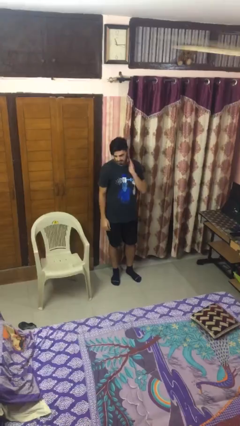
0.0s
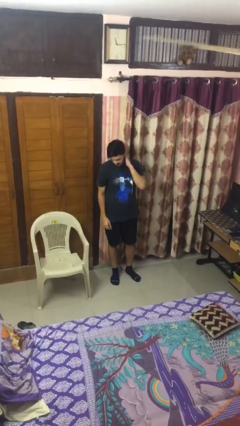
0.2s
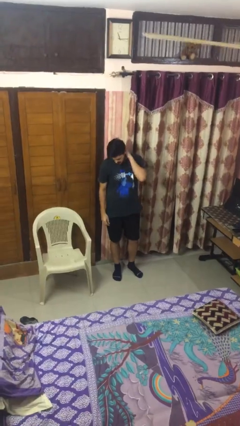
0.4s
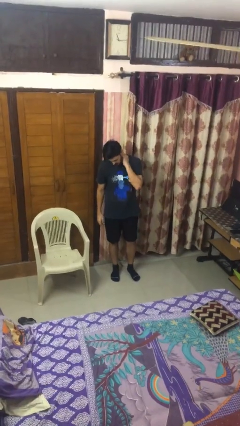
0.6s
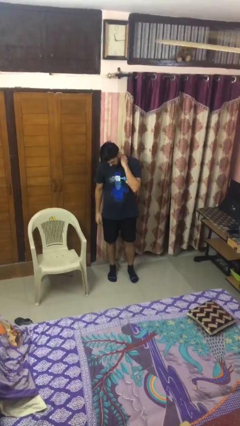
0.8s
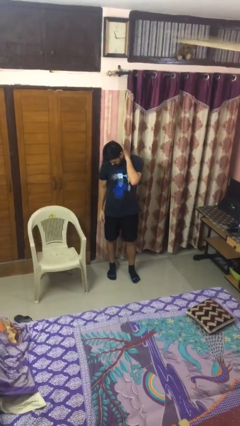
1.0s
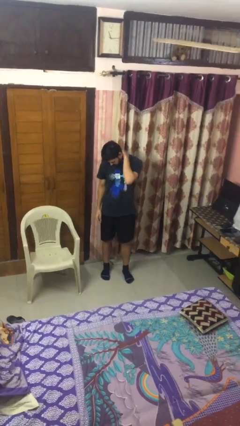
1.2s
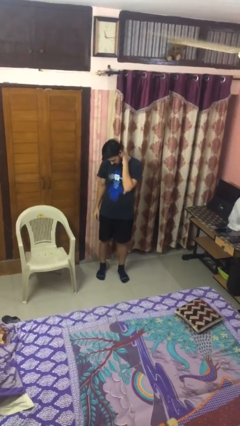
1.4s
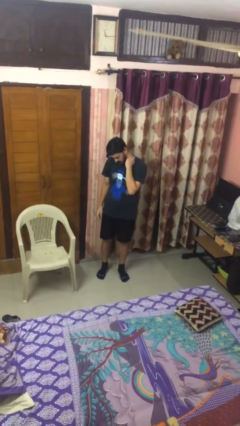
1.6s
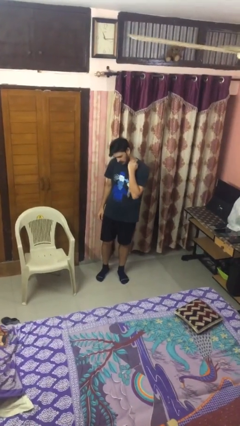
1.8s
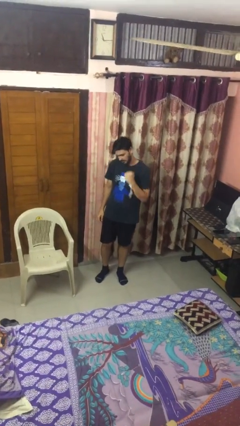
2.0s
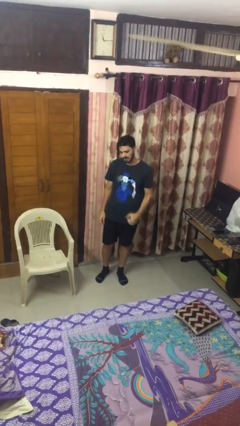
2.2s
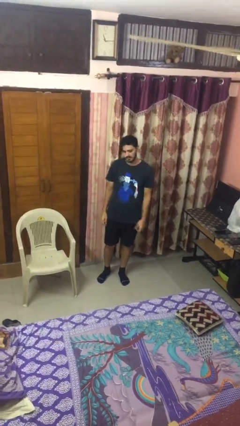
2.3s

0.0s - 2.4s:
person rubs neck

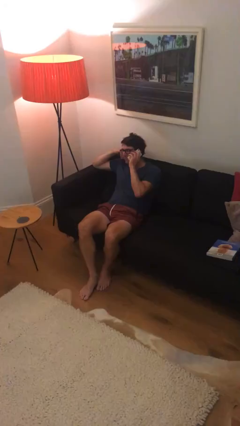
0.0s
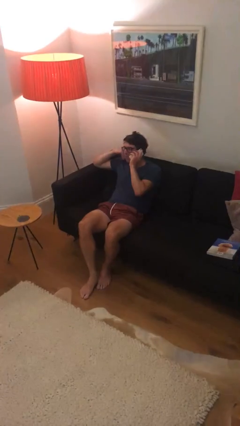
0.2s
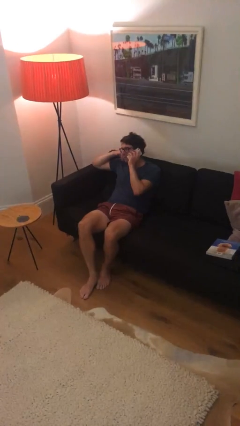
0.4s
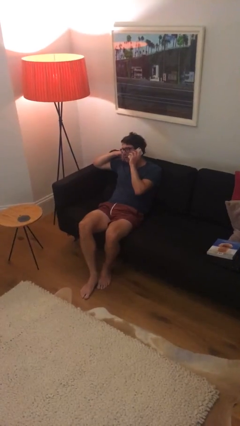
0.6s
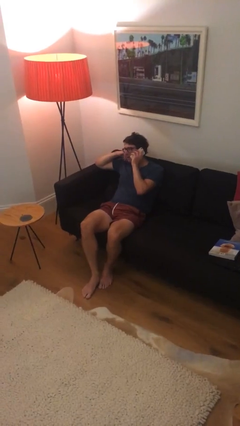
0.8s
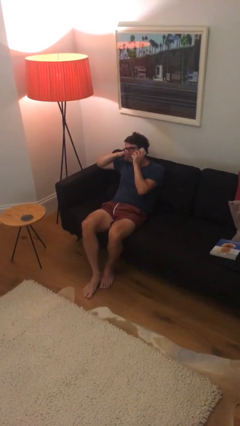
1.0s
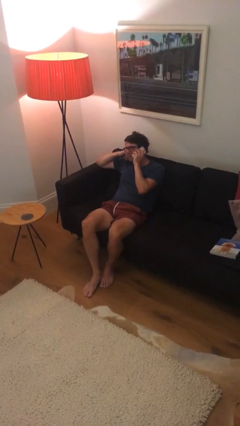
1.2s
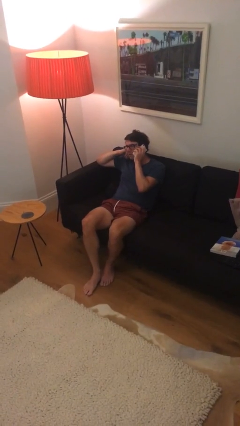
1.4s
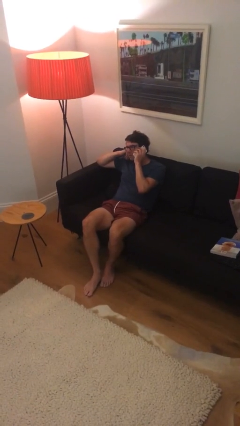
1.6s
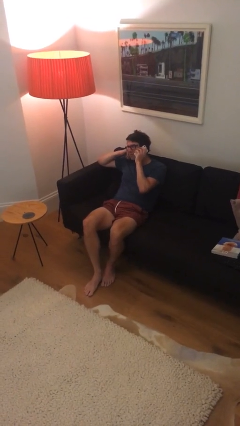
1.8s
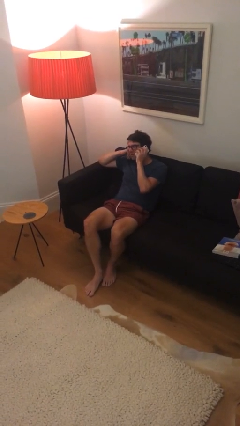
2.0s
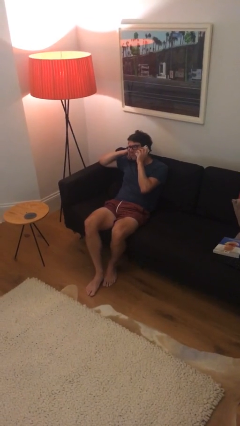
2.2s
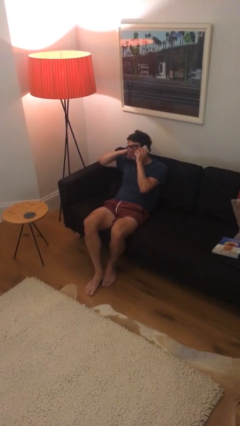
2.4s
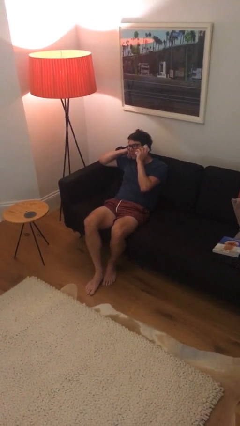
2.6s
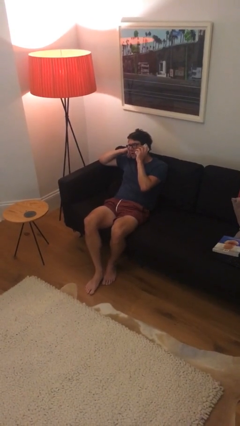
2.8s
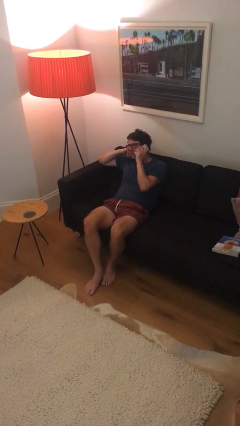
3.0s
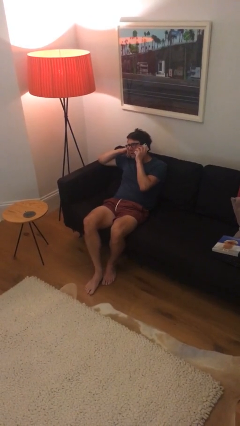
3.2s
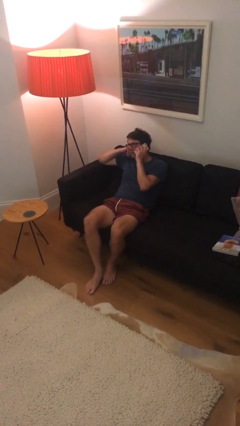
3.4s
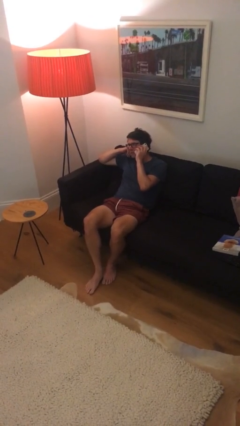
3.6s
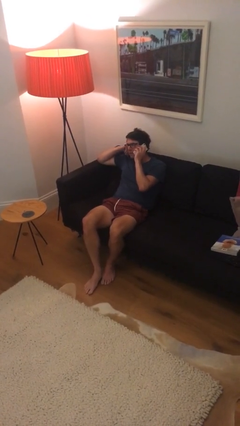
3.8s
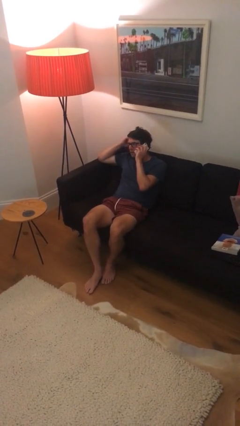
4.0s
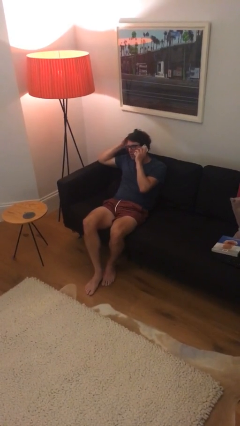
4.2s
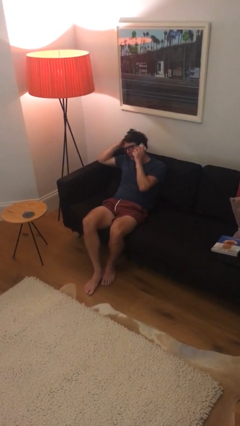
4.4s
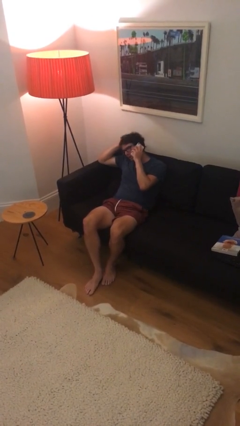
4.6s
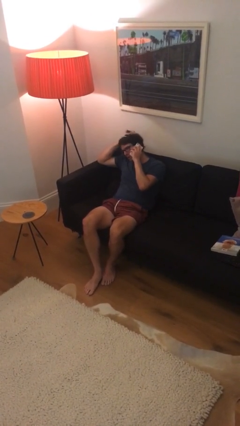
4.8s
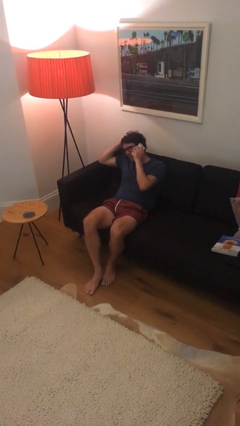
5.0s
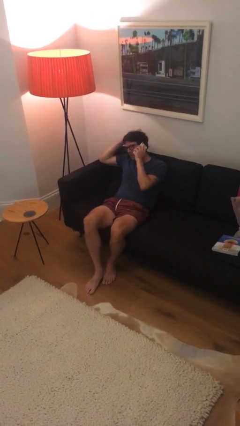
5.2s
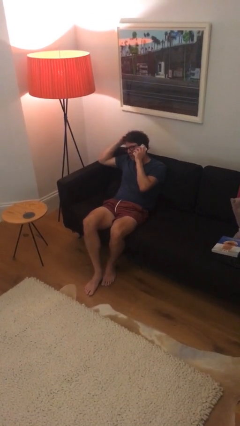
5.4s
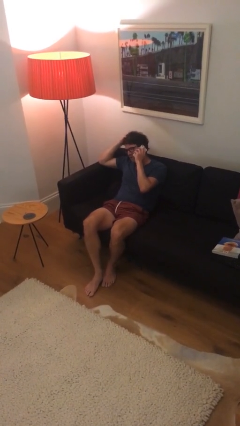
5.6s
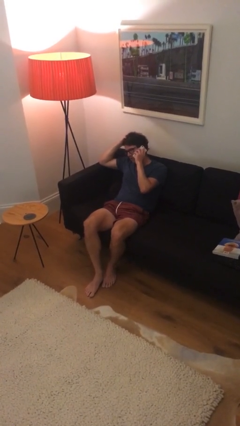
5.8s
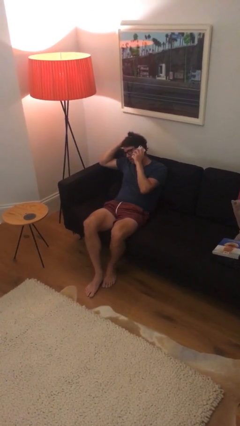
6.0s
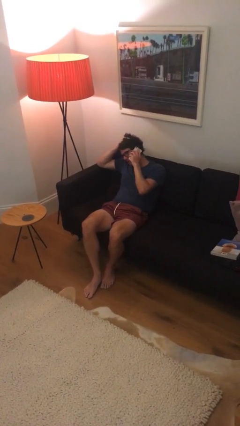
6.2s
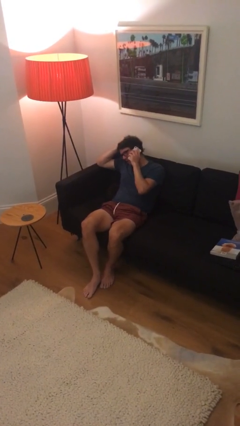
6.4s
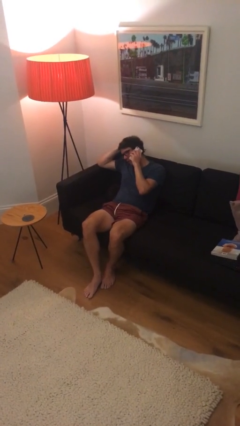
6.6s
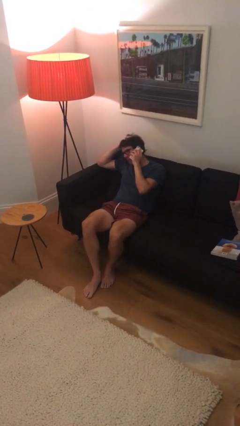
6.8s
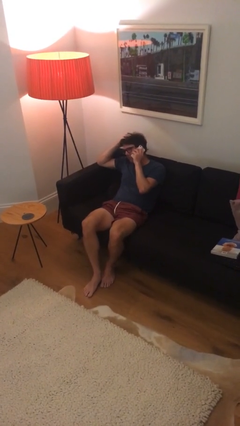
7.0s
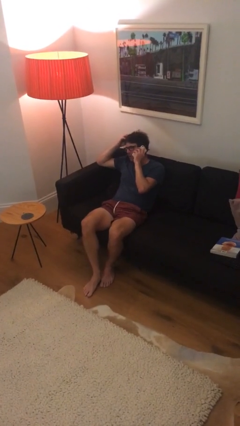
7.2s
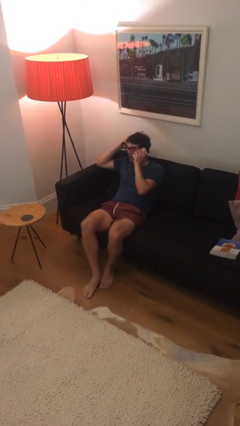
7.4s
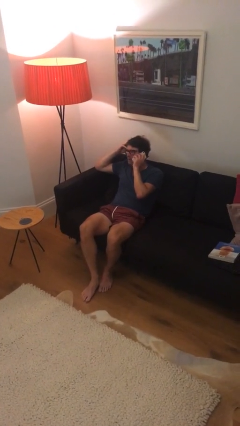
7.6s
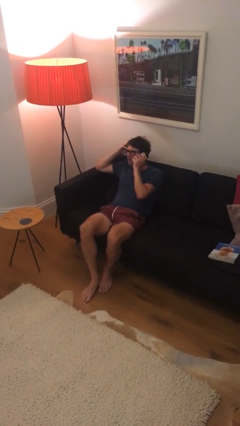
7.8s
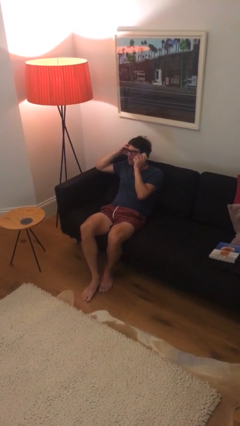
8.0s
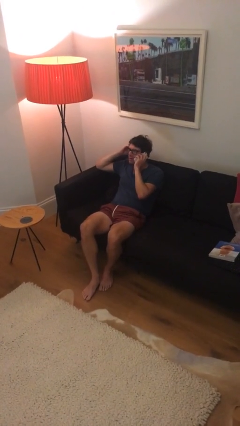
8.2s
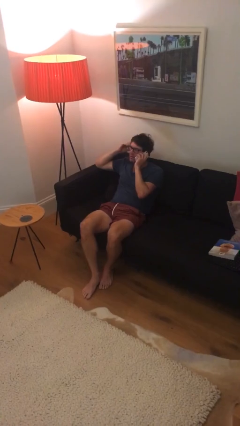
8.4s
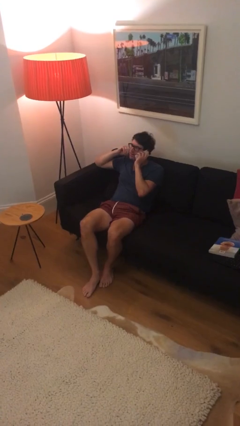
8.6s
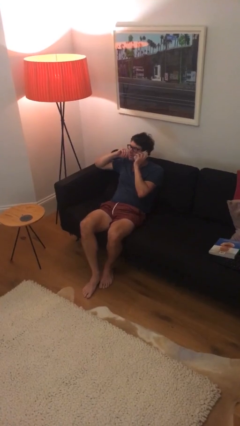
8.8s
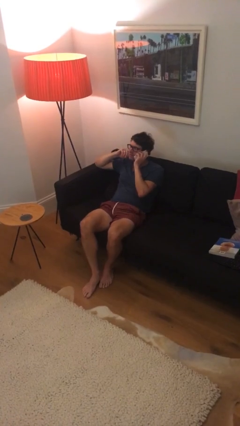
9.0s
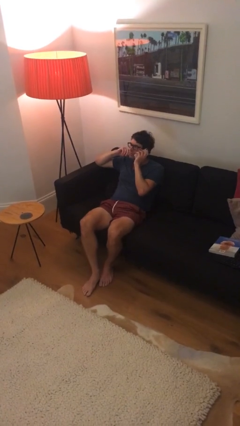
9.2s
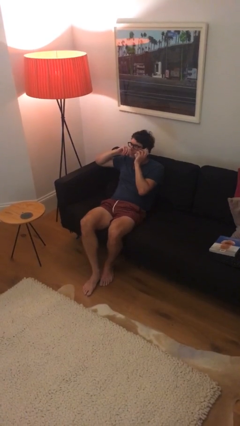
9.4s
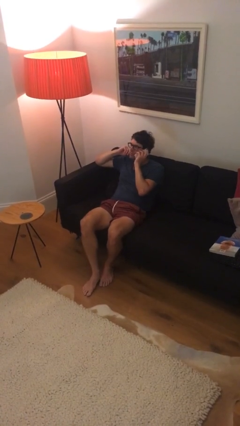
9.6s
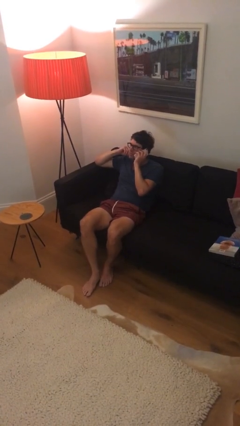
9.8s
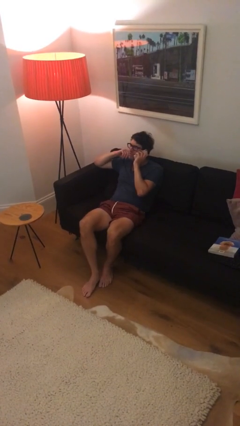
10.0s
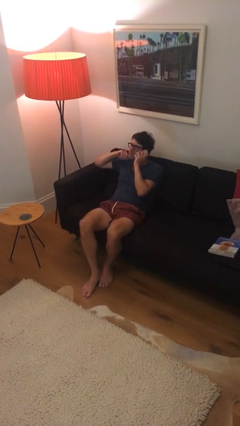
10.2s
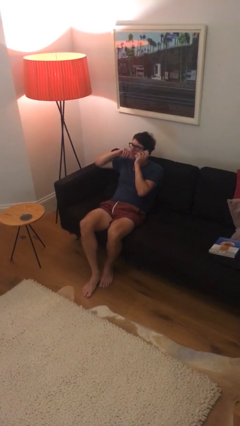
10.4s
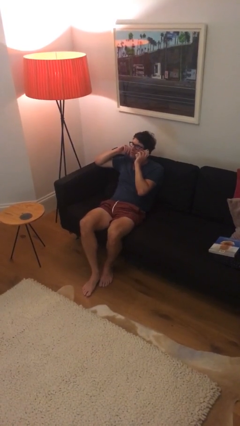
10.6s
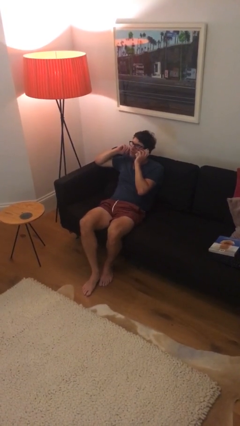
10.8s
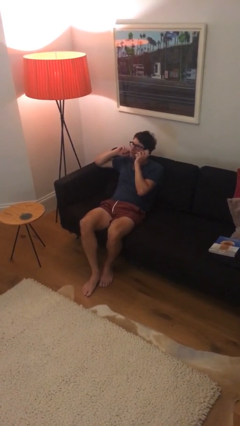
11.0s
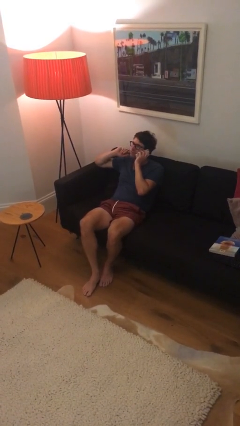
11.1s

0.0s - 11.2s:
person talks on phone

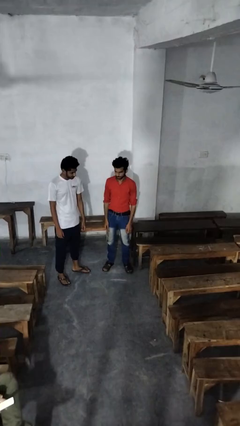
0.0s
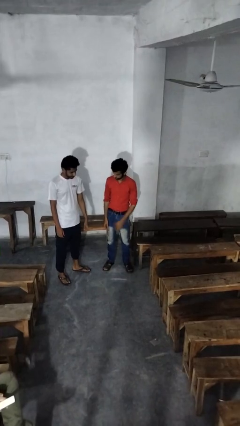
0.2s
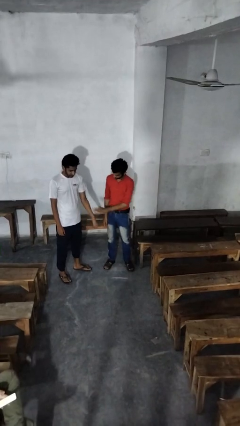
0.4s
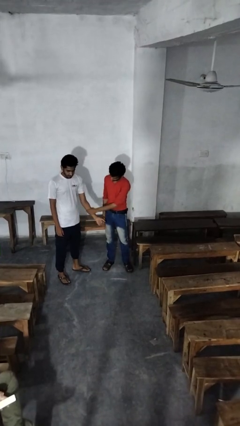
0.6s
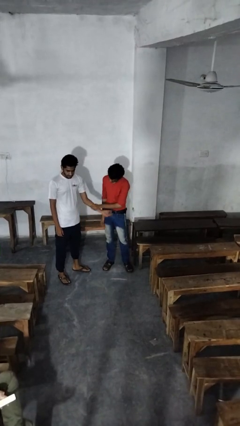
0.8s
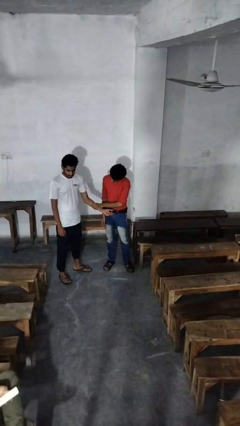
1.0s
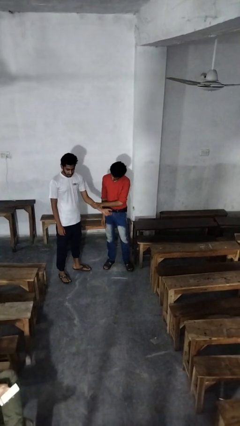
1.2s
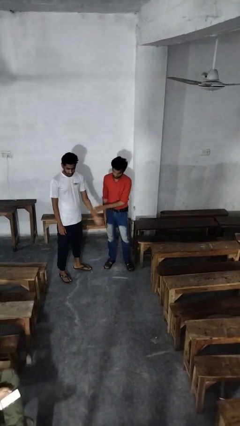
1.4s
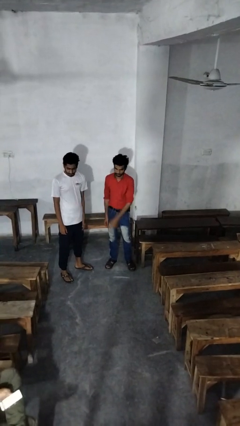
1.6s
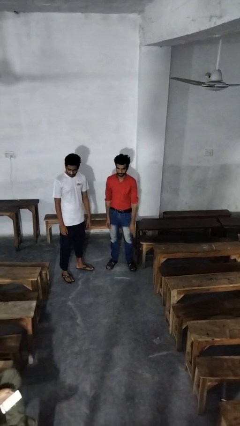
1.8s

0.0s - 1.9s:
person grabs person by forearm

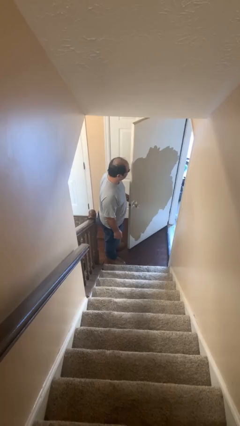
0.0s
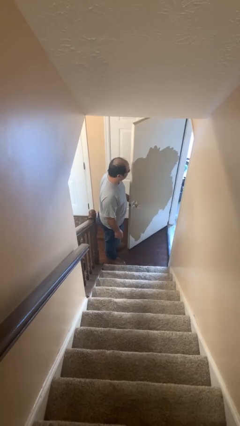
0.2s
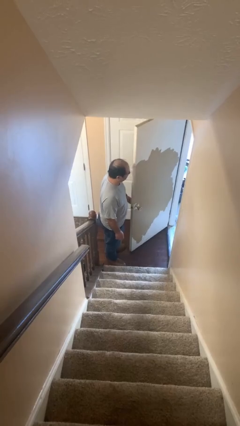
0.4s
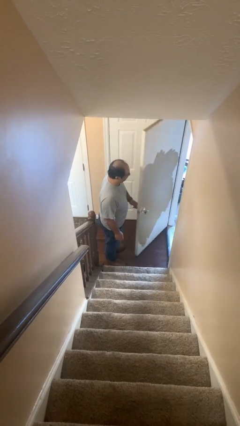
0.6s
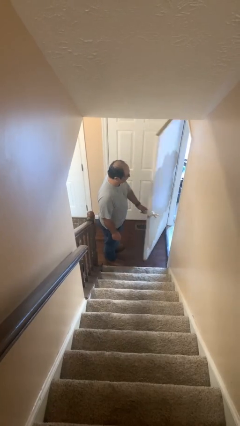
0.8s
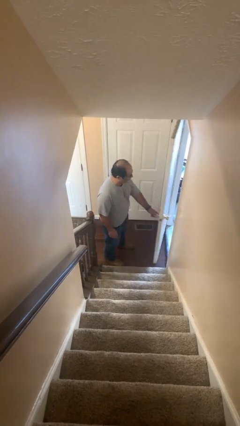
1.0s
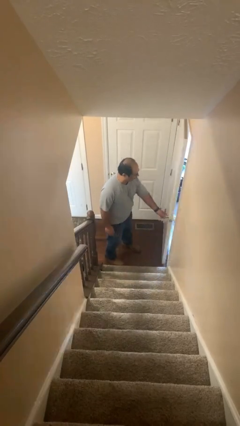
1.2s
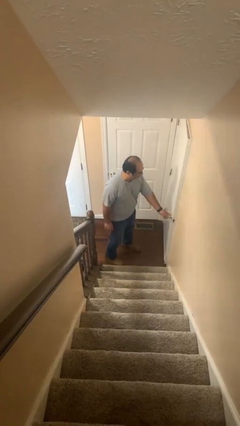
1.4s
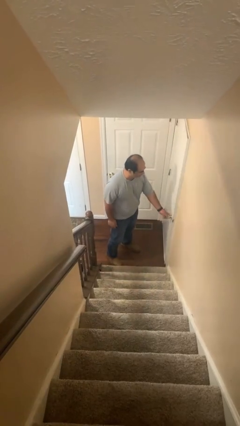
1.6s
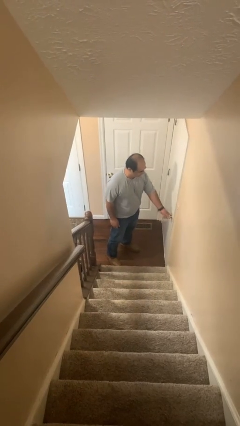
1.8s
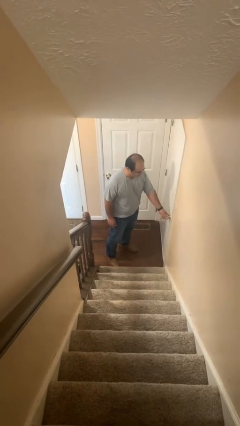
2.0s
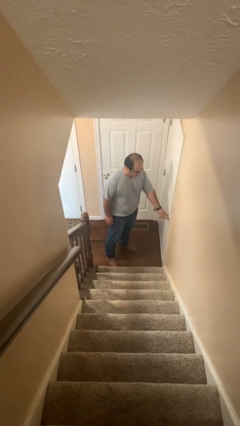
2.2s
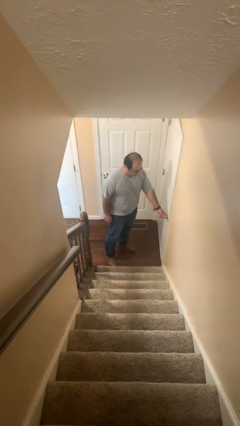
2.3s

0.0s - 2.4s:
person closes facility door
